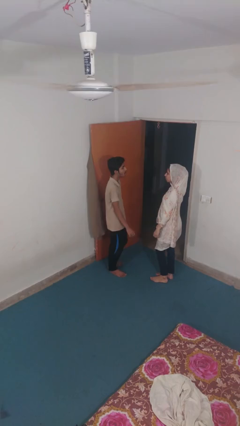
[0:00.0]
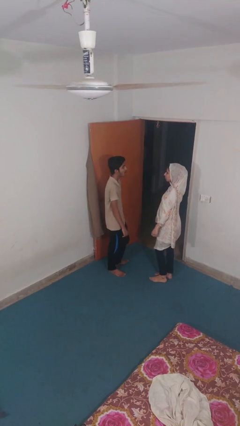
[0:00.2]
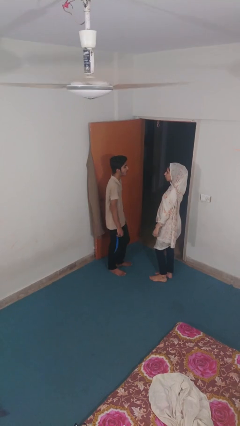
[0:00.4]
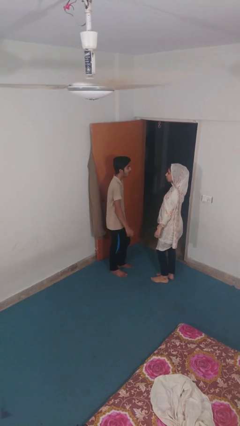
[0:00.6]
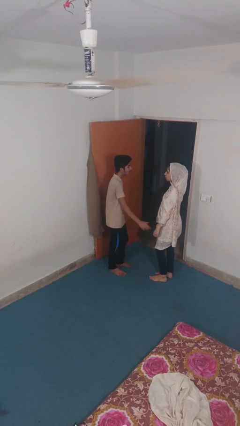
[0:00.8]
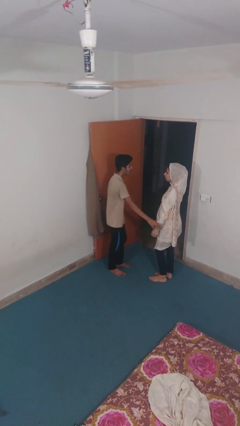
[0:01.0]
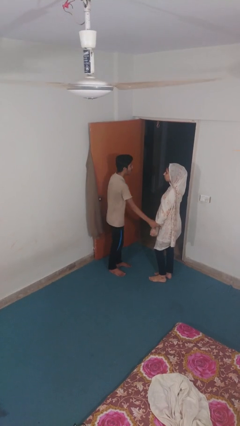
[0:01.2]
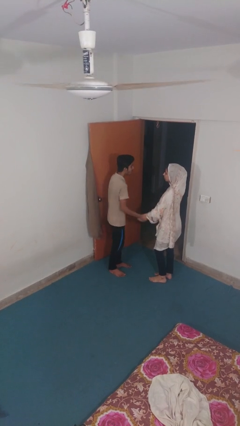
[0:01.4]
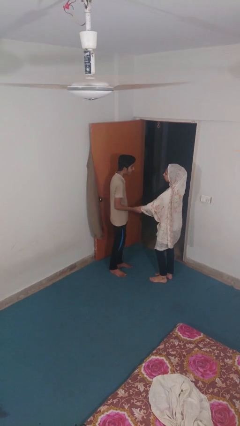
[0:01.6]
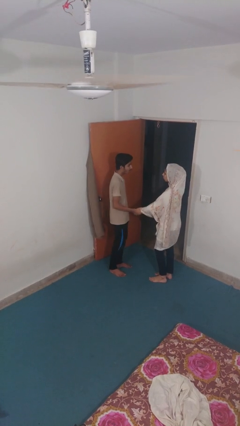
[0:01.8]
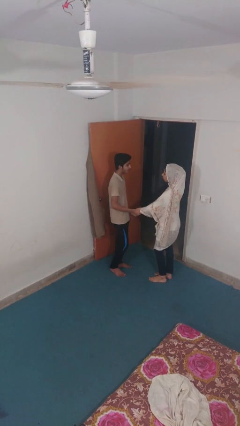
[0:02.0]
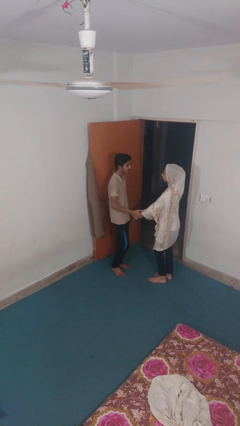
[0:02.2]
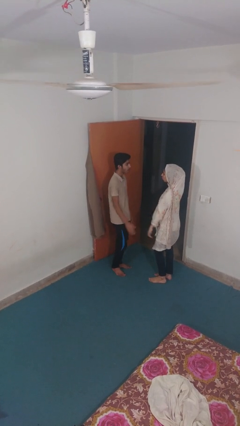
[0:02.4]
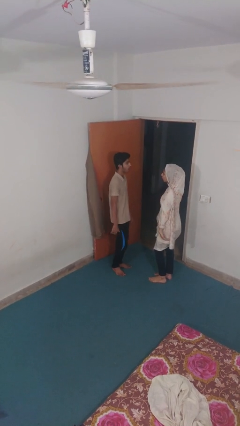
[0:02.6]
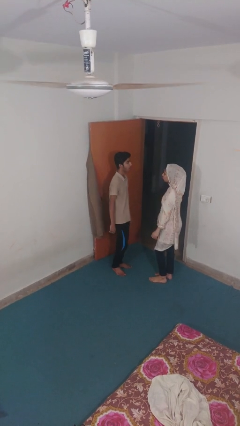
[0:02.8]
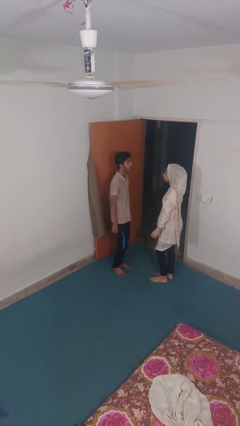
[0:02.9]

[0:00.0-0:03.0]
person grabs person by forearm

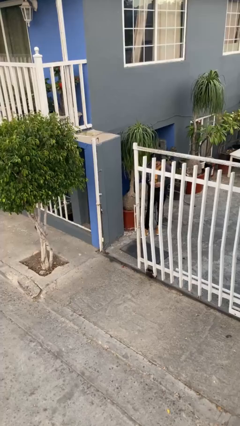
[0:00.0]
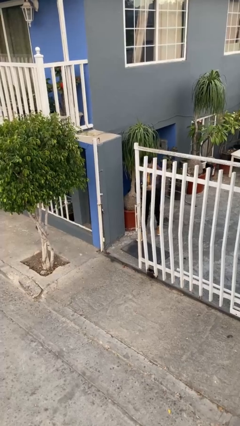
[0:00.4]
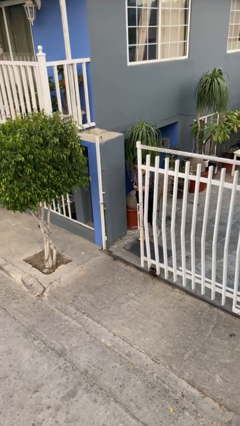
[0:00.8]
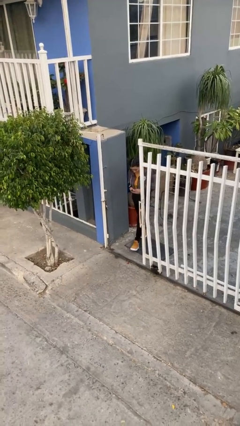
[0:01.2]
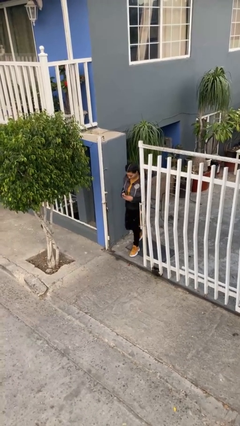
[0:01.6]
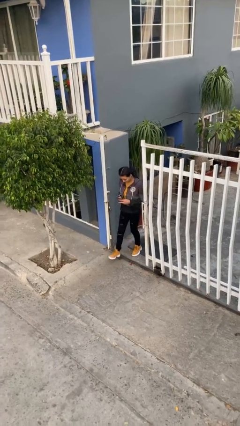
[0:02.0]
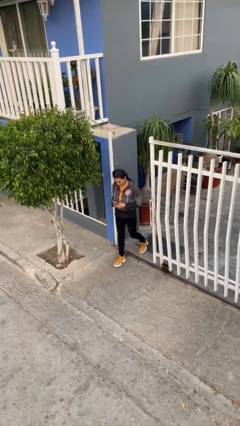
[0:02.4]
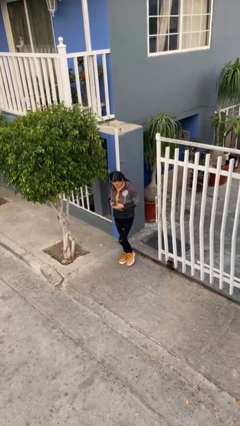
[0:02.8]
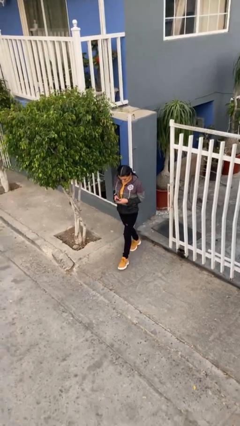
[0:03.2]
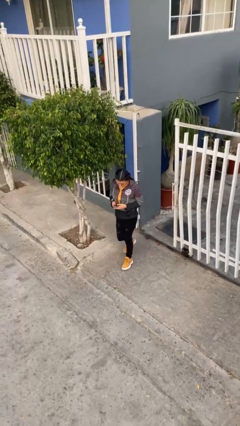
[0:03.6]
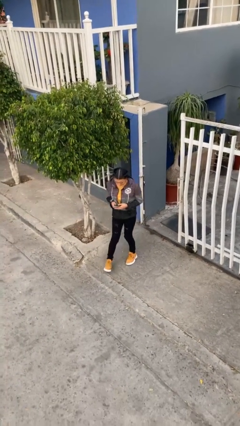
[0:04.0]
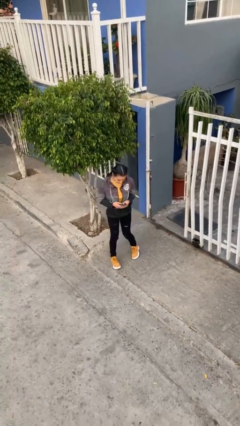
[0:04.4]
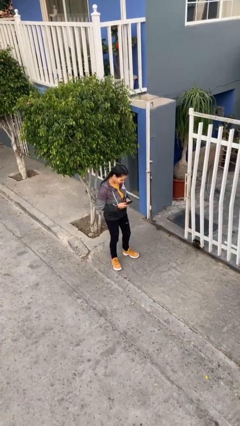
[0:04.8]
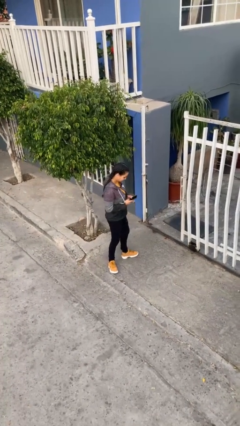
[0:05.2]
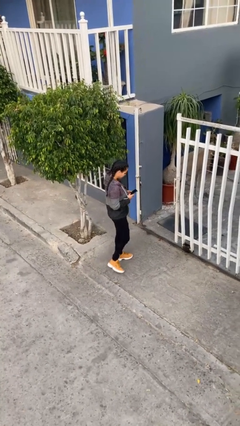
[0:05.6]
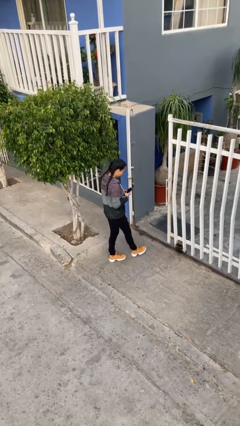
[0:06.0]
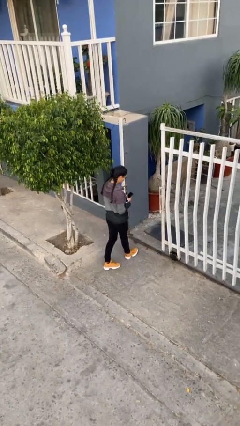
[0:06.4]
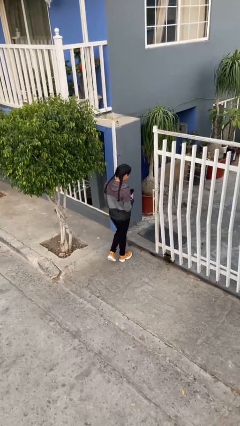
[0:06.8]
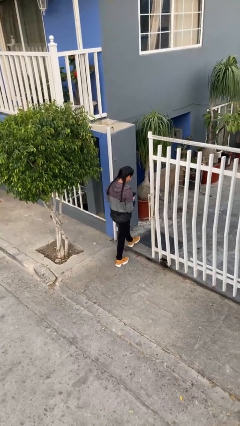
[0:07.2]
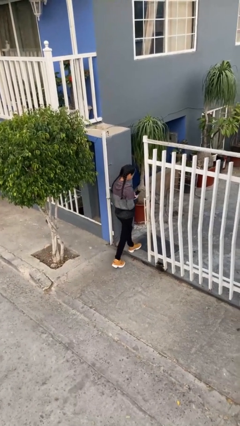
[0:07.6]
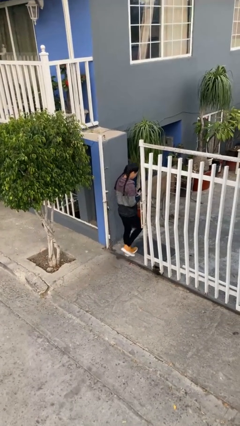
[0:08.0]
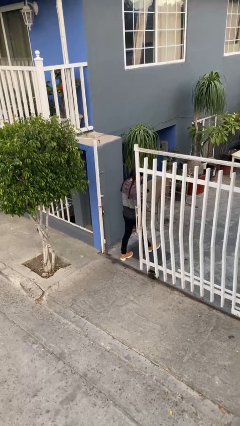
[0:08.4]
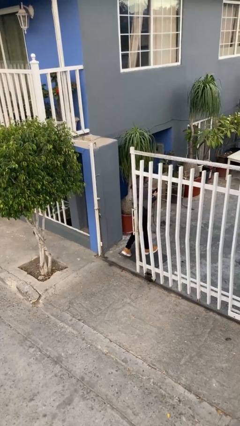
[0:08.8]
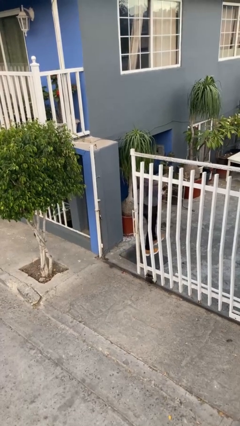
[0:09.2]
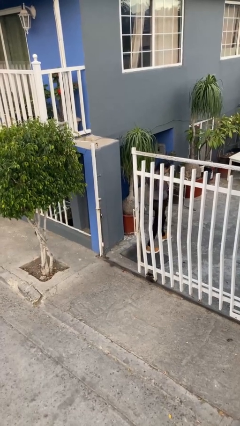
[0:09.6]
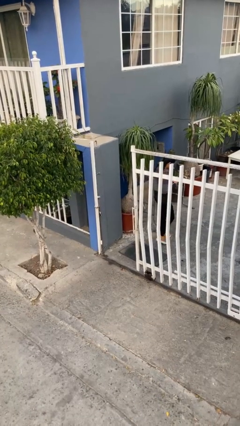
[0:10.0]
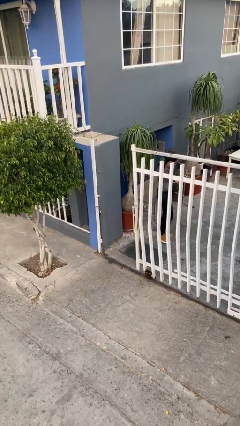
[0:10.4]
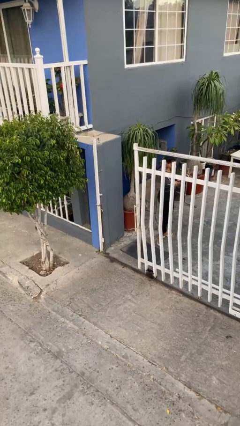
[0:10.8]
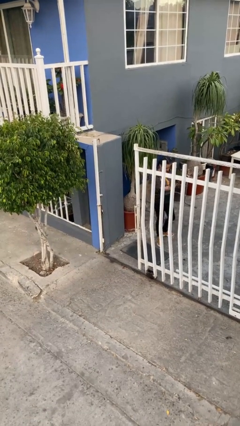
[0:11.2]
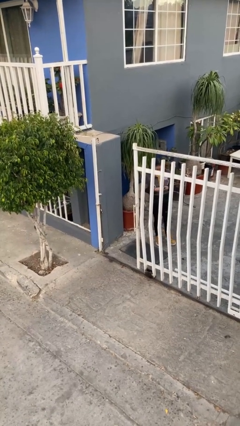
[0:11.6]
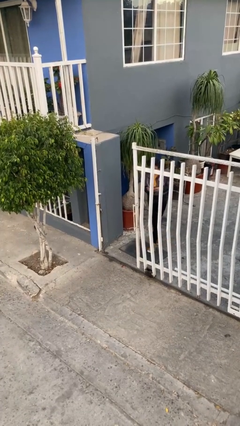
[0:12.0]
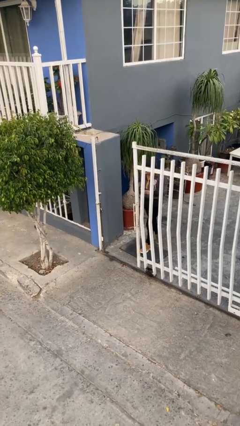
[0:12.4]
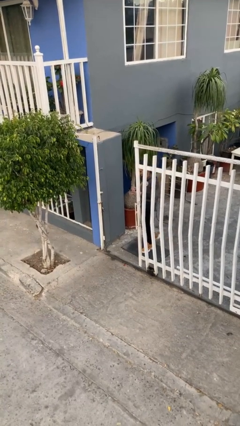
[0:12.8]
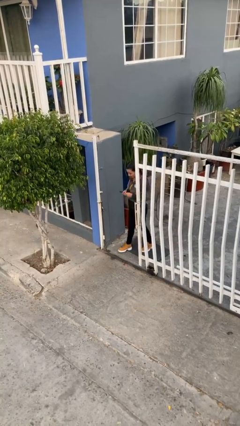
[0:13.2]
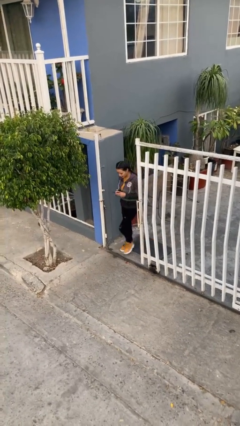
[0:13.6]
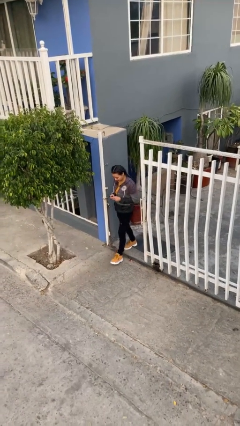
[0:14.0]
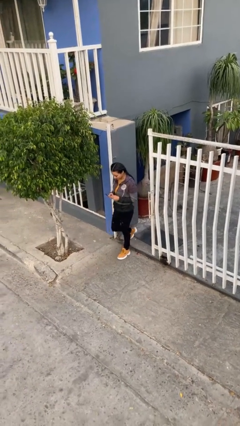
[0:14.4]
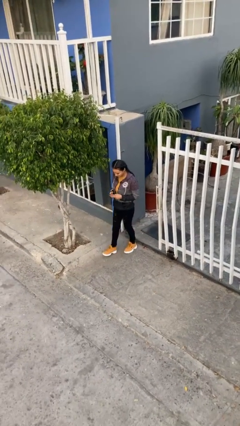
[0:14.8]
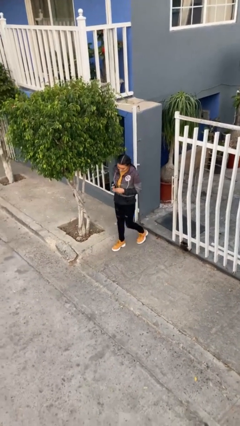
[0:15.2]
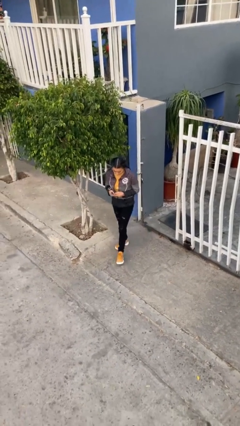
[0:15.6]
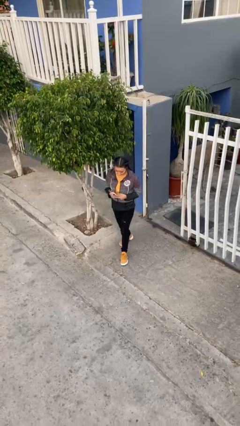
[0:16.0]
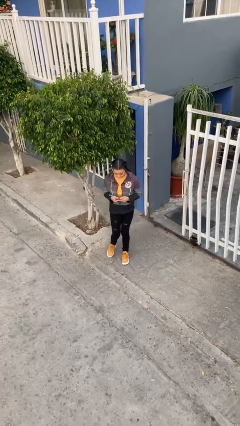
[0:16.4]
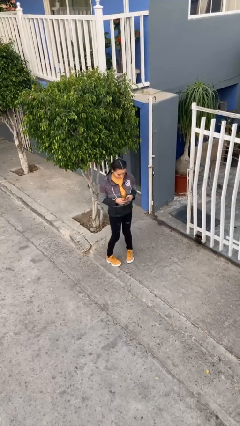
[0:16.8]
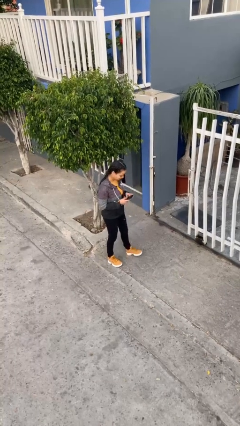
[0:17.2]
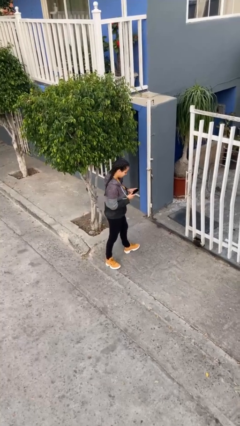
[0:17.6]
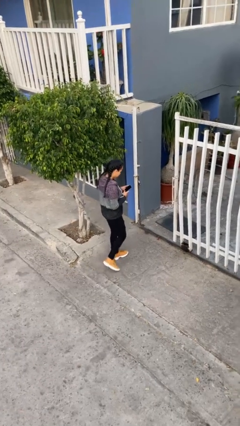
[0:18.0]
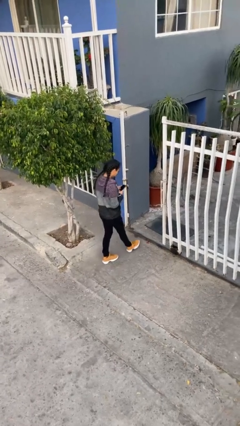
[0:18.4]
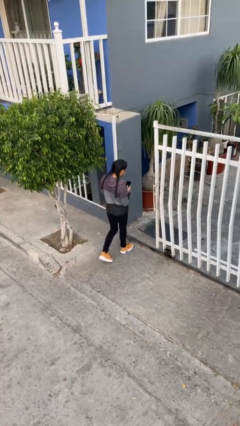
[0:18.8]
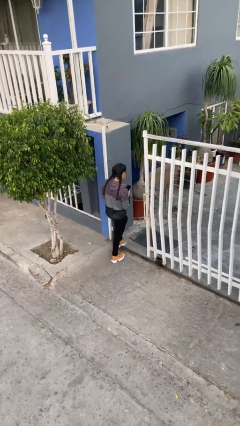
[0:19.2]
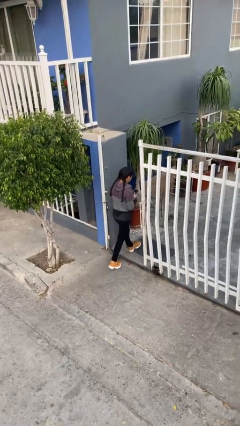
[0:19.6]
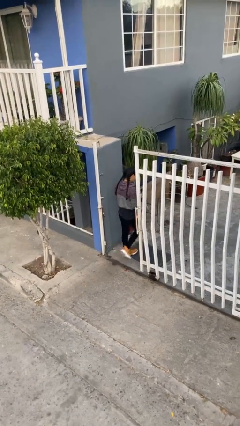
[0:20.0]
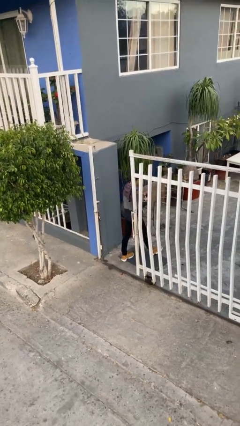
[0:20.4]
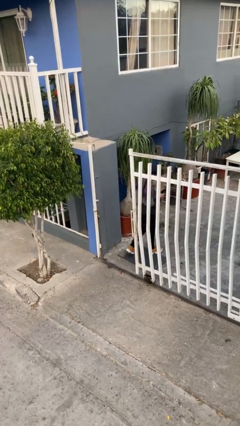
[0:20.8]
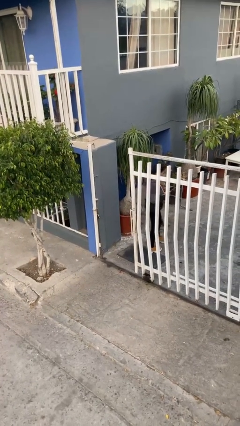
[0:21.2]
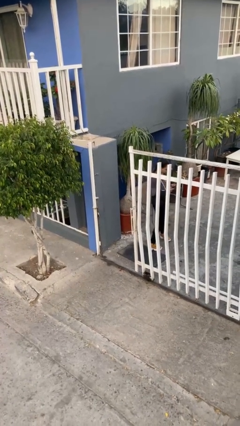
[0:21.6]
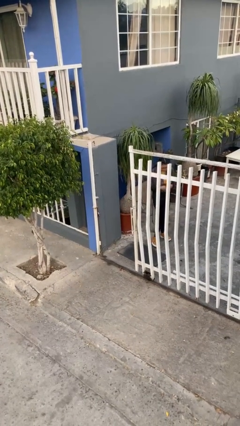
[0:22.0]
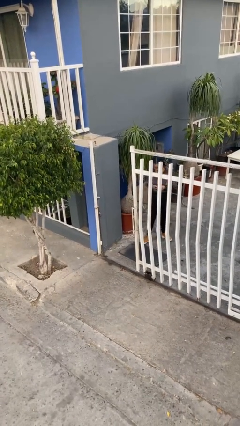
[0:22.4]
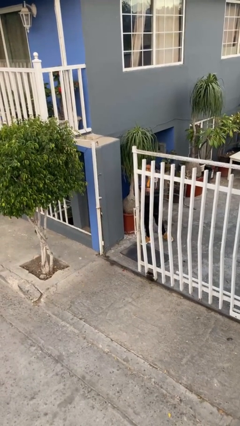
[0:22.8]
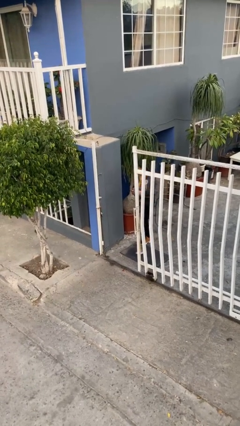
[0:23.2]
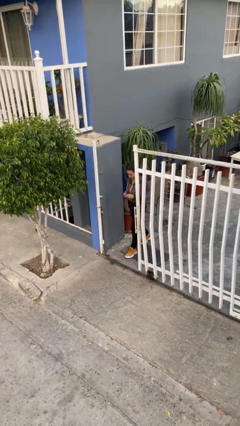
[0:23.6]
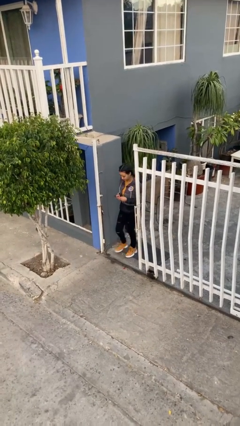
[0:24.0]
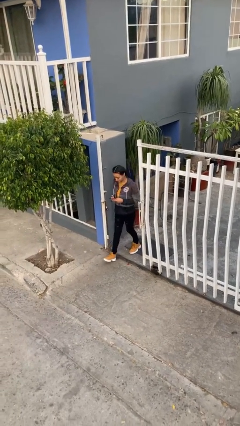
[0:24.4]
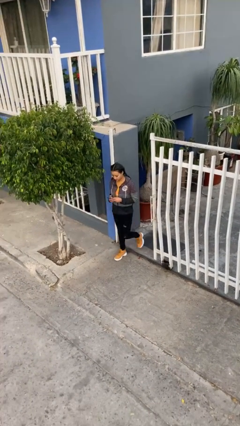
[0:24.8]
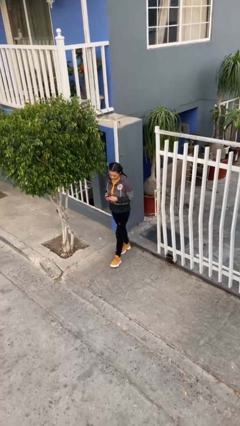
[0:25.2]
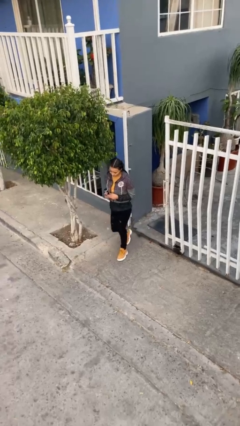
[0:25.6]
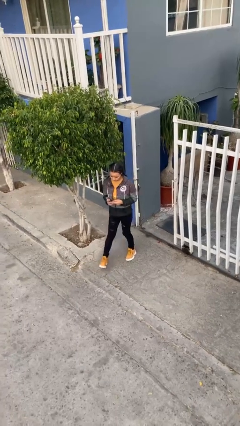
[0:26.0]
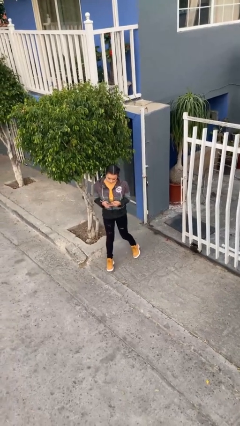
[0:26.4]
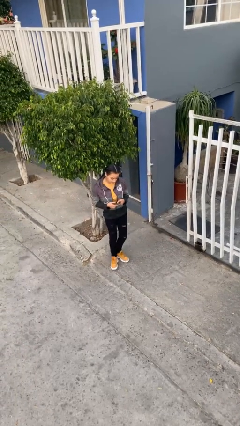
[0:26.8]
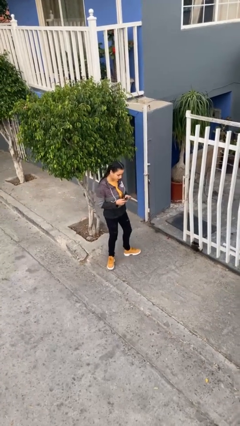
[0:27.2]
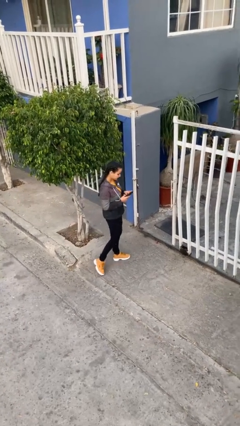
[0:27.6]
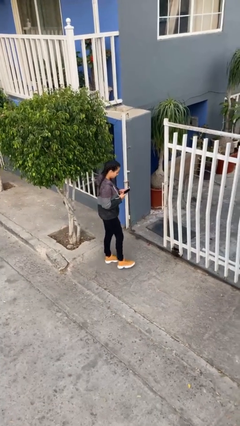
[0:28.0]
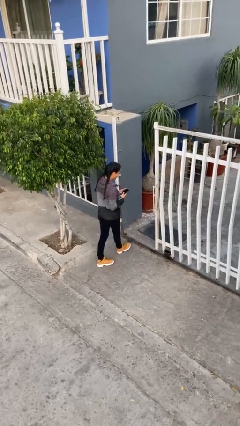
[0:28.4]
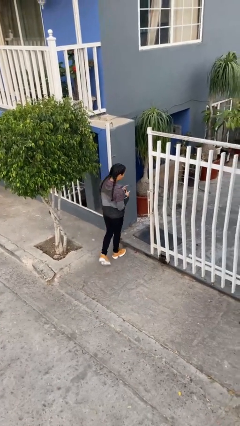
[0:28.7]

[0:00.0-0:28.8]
person texts on phone

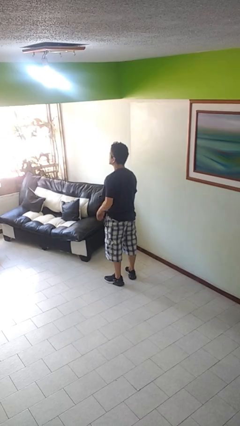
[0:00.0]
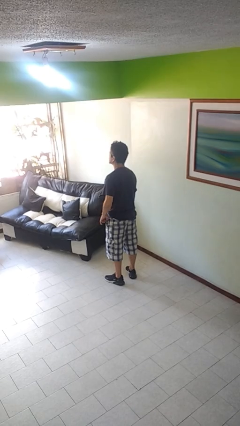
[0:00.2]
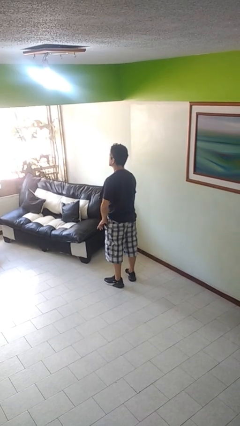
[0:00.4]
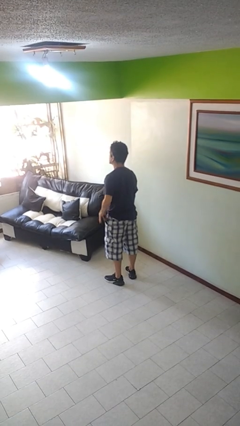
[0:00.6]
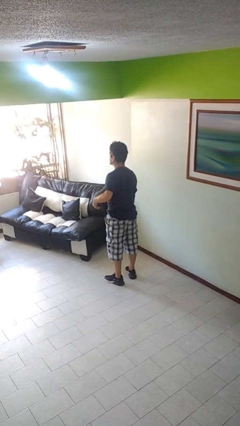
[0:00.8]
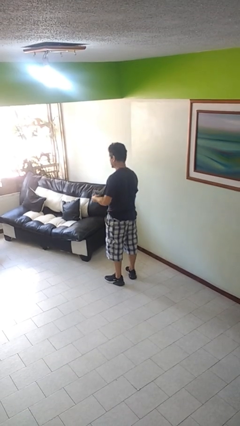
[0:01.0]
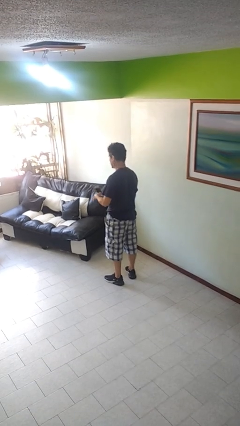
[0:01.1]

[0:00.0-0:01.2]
person takes phone from pocket
